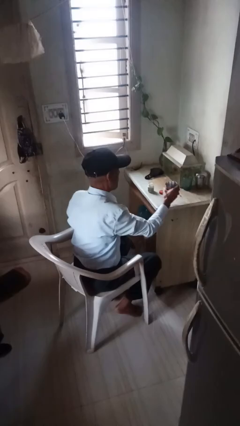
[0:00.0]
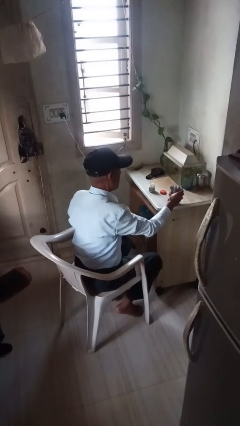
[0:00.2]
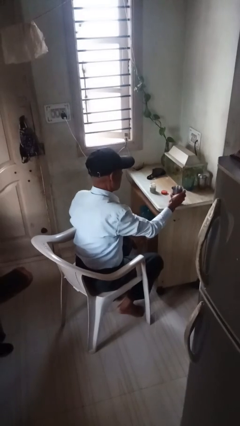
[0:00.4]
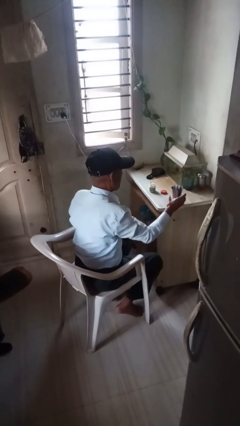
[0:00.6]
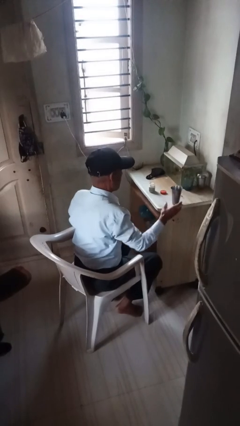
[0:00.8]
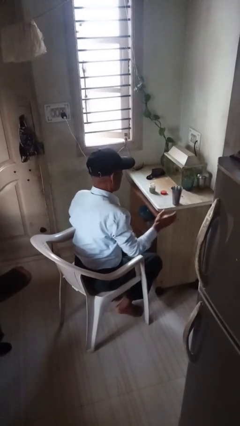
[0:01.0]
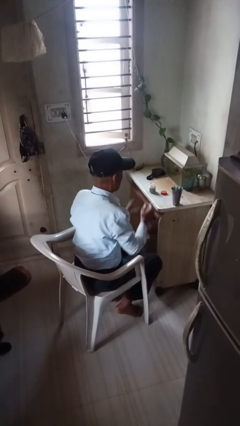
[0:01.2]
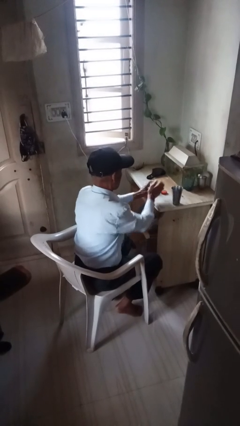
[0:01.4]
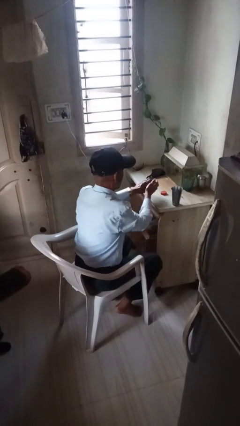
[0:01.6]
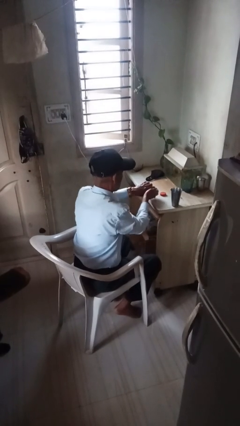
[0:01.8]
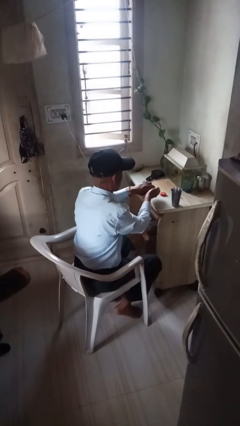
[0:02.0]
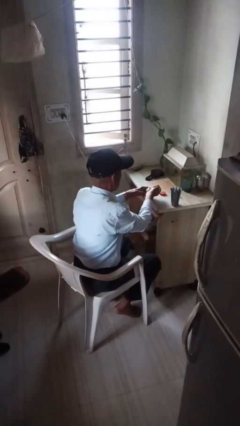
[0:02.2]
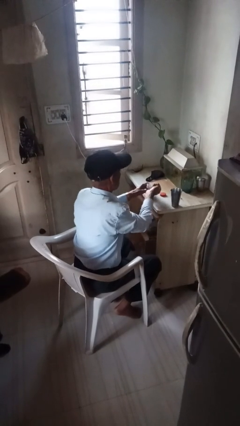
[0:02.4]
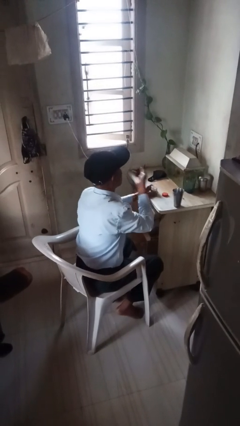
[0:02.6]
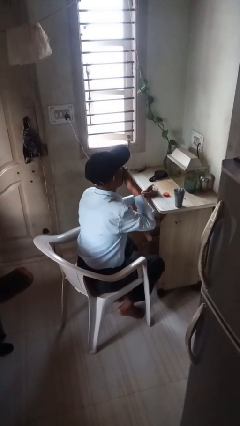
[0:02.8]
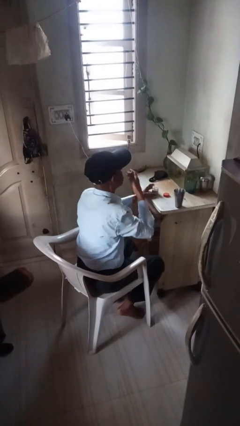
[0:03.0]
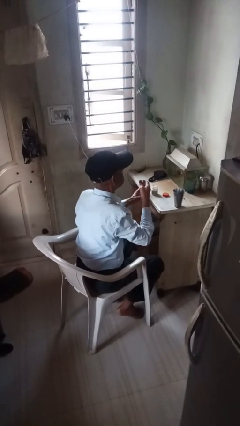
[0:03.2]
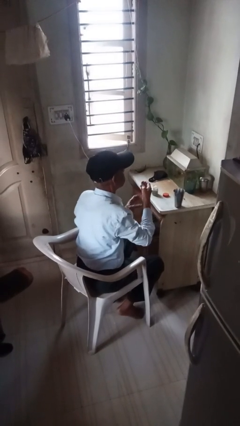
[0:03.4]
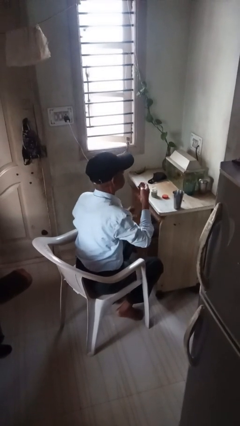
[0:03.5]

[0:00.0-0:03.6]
person takes medicine pills

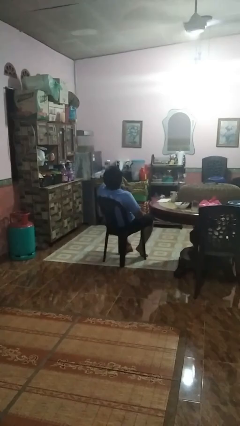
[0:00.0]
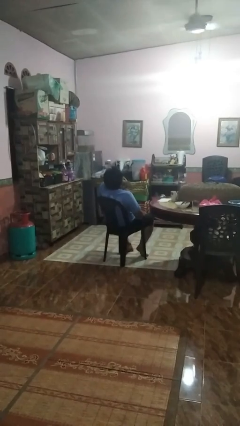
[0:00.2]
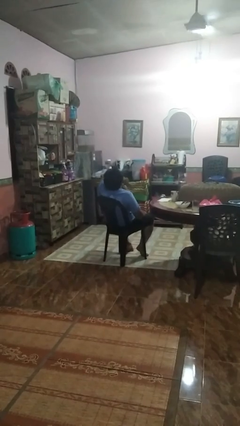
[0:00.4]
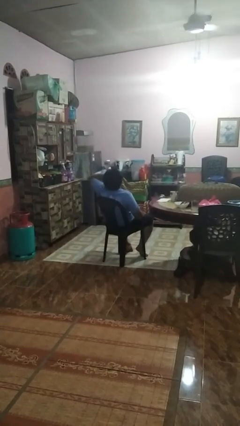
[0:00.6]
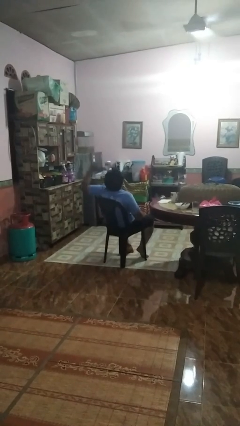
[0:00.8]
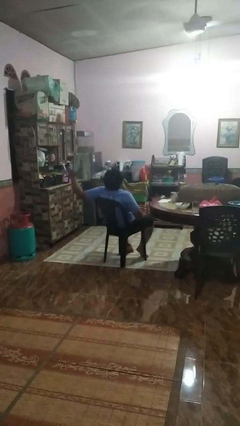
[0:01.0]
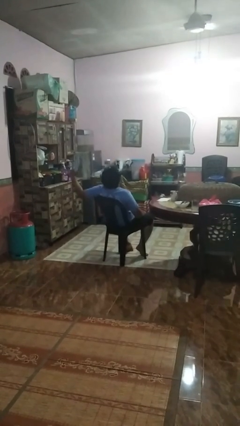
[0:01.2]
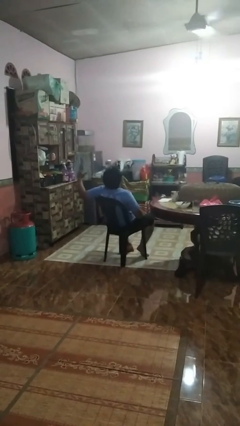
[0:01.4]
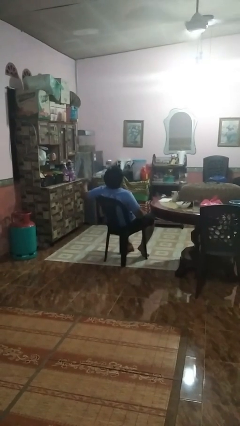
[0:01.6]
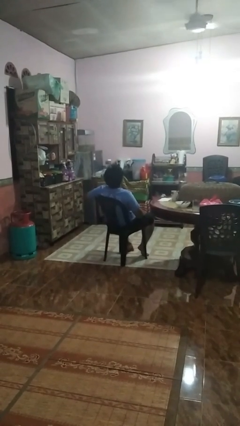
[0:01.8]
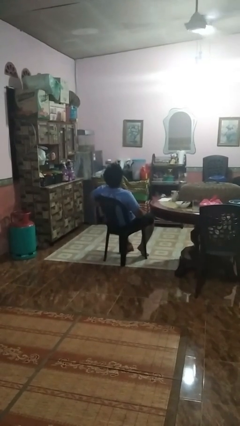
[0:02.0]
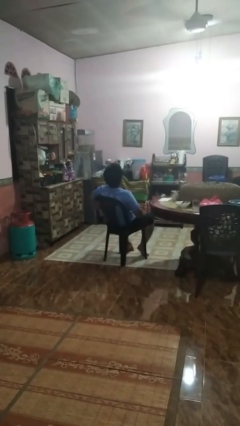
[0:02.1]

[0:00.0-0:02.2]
person gestures cut

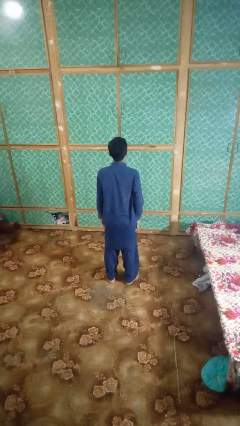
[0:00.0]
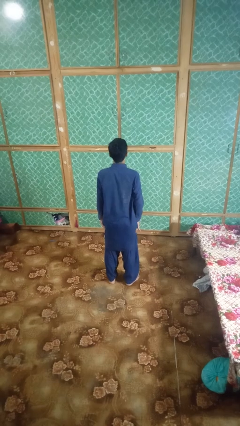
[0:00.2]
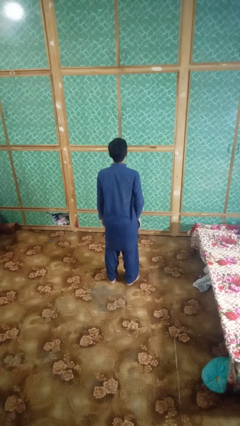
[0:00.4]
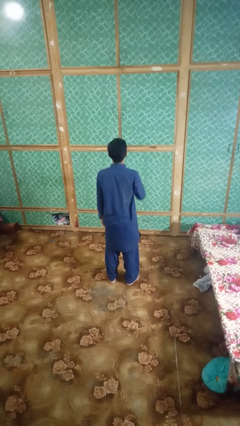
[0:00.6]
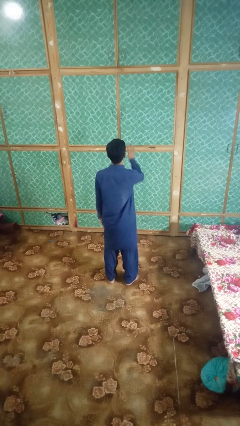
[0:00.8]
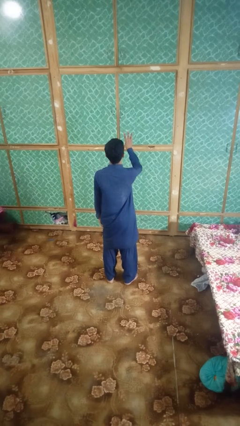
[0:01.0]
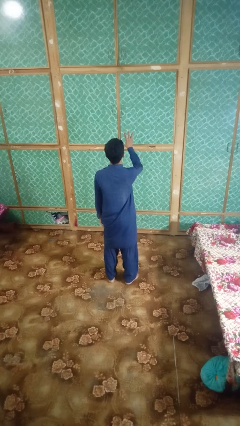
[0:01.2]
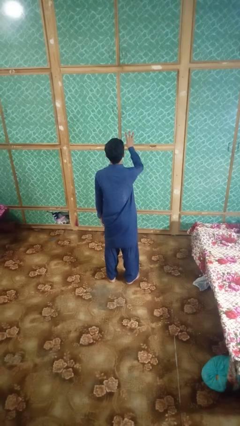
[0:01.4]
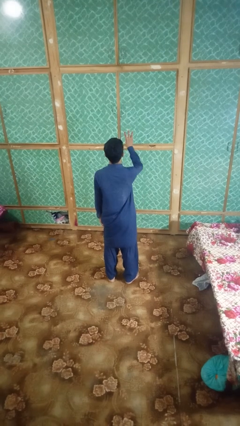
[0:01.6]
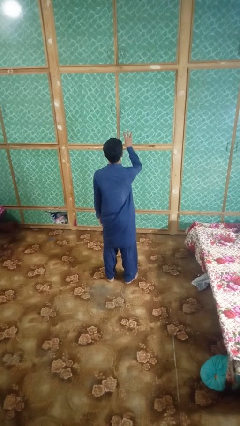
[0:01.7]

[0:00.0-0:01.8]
person gestures number three

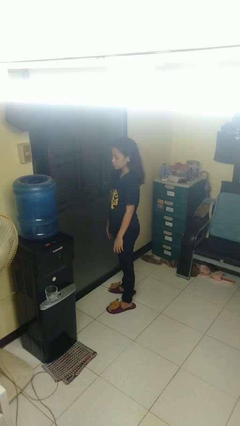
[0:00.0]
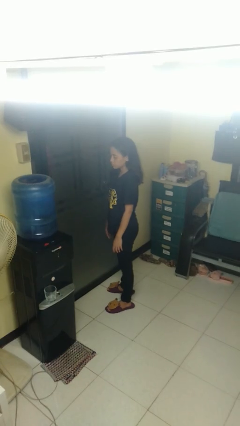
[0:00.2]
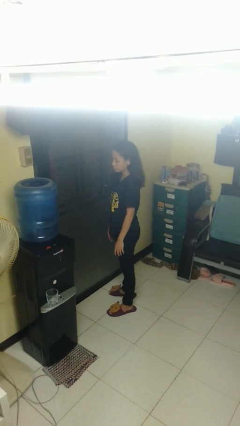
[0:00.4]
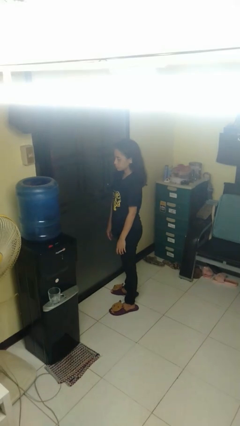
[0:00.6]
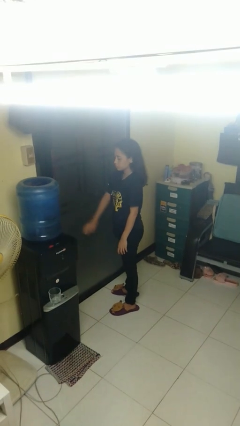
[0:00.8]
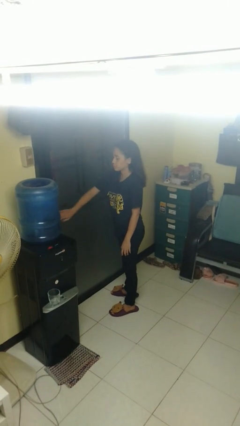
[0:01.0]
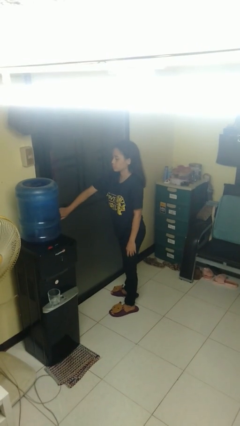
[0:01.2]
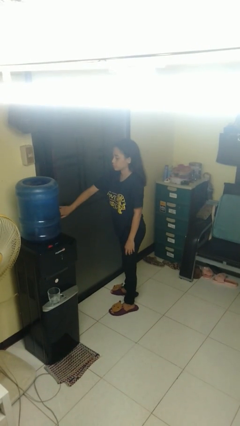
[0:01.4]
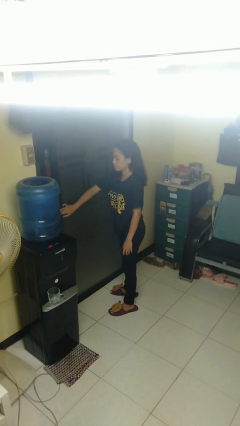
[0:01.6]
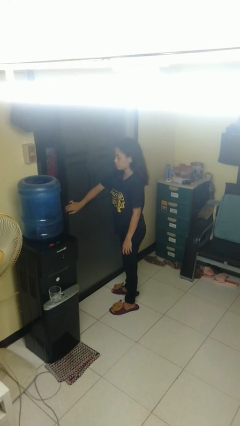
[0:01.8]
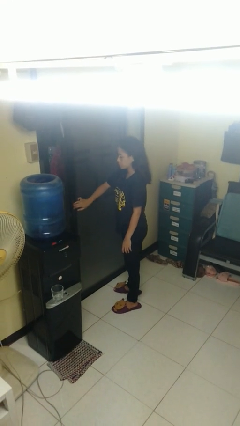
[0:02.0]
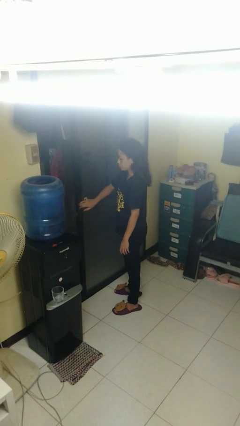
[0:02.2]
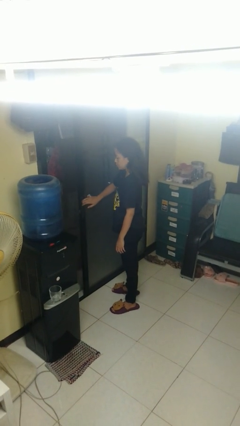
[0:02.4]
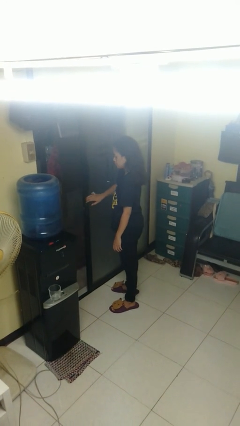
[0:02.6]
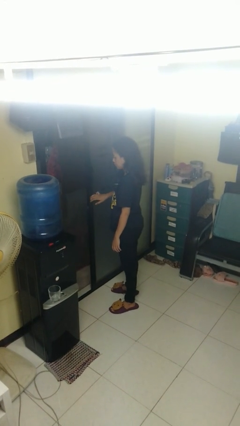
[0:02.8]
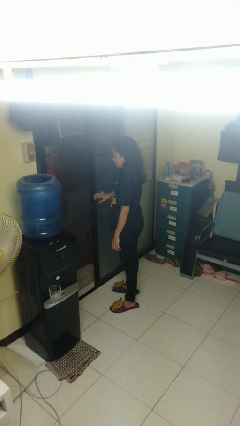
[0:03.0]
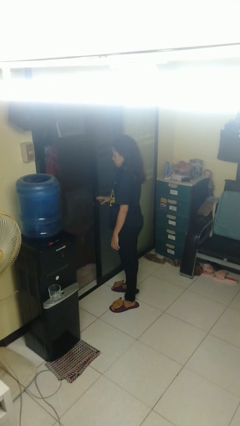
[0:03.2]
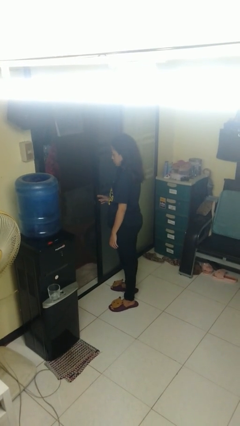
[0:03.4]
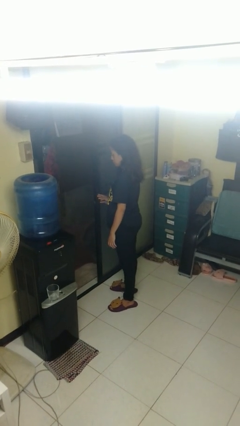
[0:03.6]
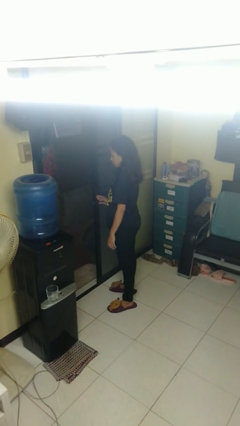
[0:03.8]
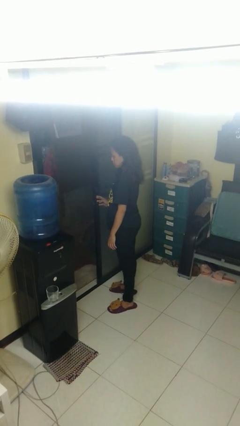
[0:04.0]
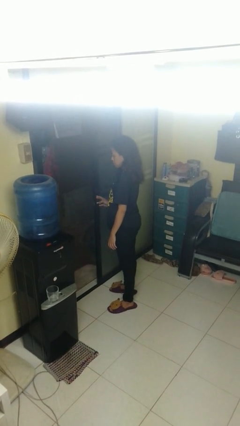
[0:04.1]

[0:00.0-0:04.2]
person opens sliding door

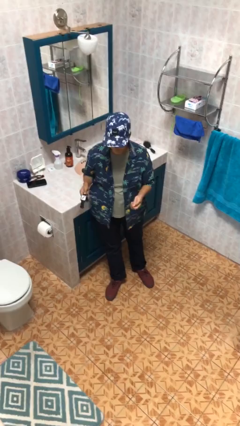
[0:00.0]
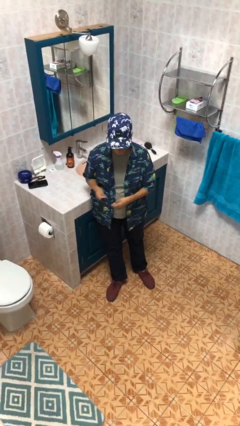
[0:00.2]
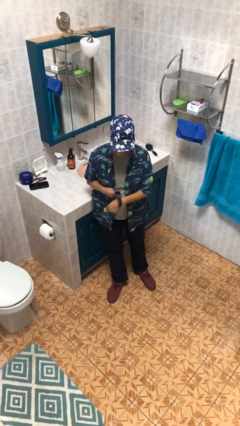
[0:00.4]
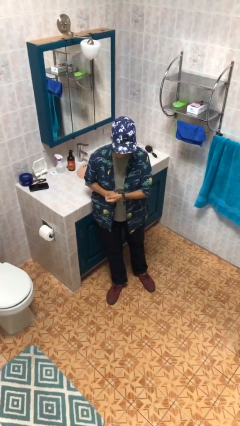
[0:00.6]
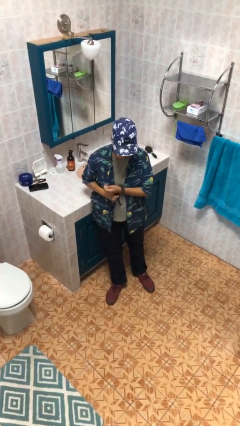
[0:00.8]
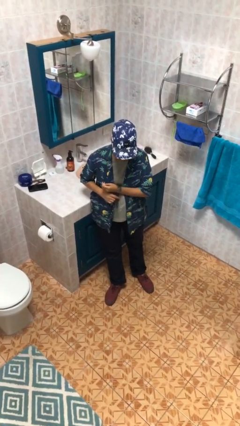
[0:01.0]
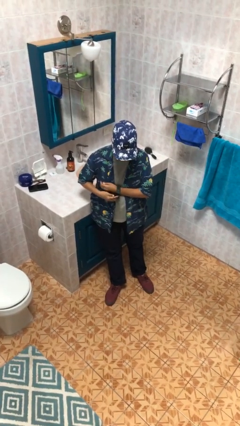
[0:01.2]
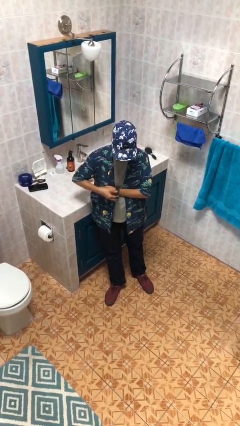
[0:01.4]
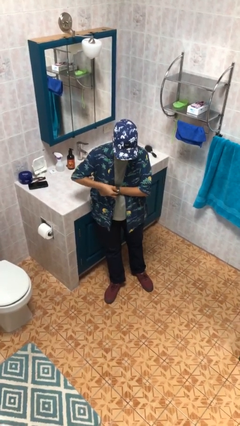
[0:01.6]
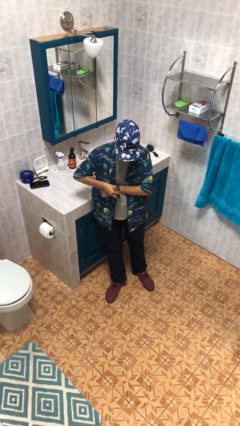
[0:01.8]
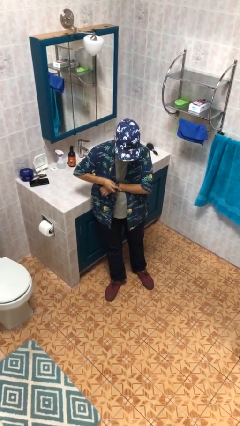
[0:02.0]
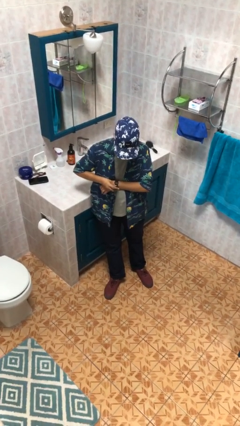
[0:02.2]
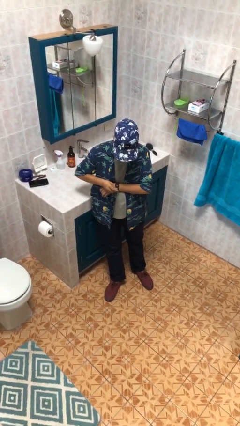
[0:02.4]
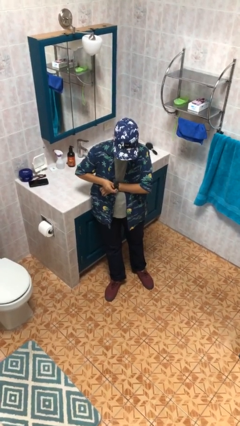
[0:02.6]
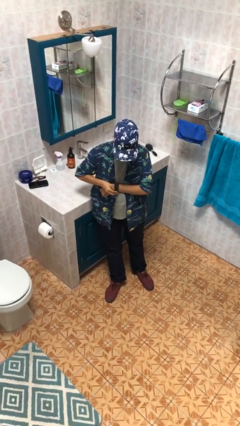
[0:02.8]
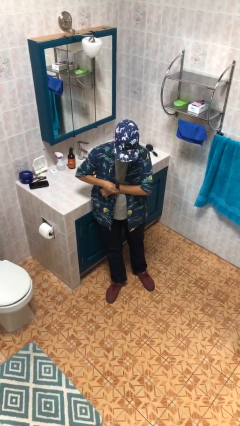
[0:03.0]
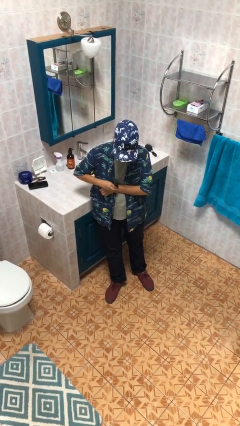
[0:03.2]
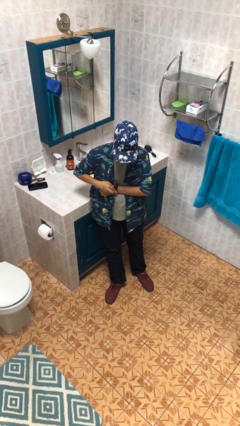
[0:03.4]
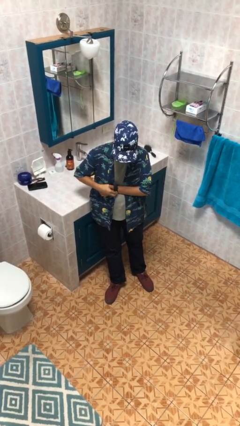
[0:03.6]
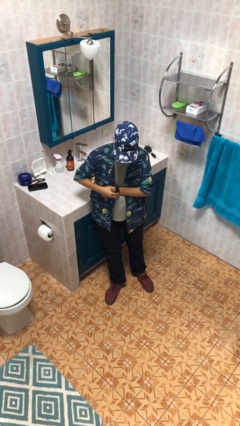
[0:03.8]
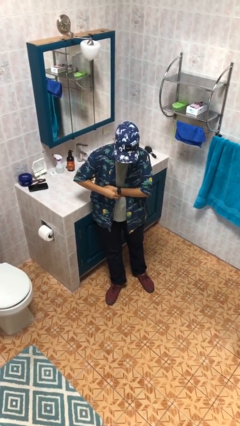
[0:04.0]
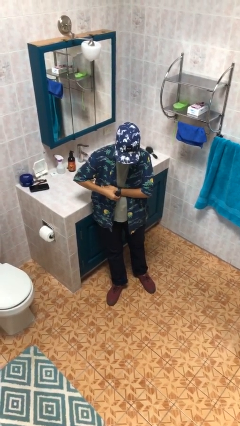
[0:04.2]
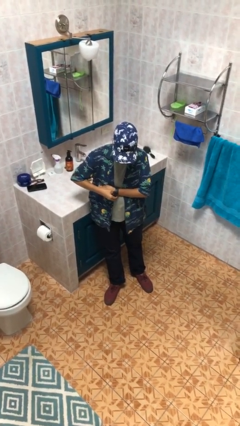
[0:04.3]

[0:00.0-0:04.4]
person puts on wristwatch

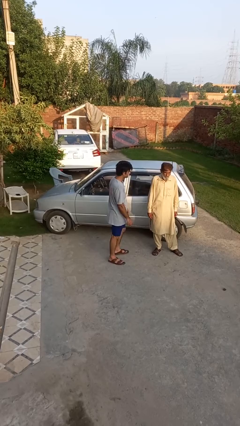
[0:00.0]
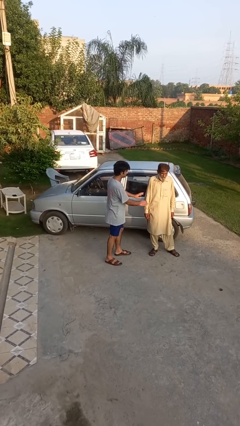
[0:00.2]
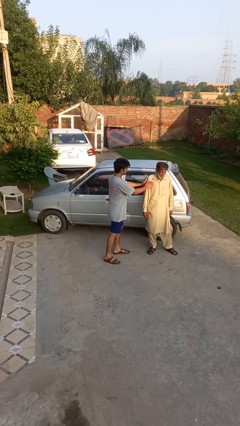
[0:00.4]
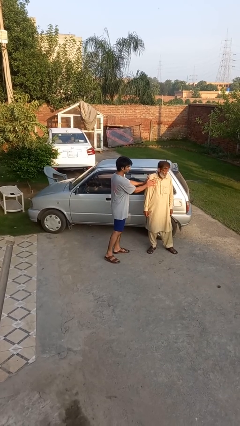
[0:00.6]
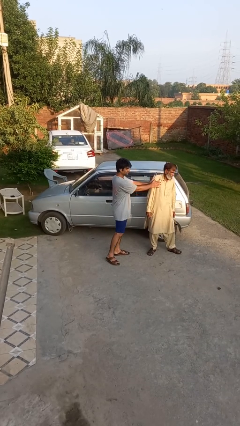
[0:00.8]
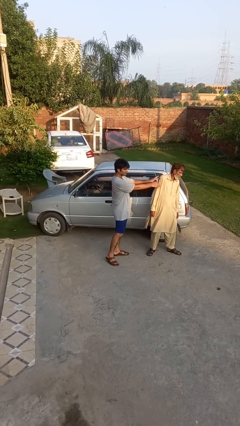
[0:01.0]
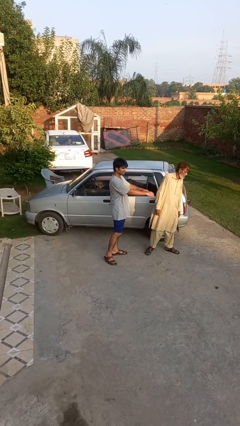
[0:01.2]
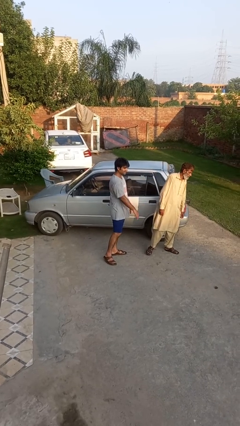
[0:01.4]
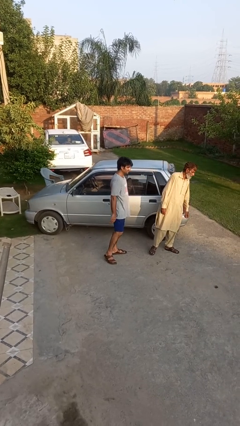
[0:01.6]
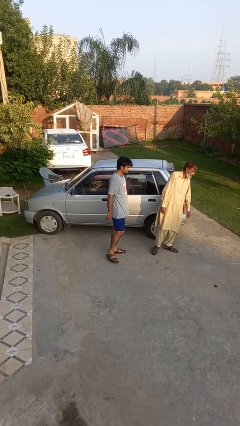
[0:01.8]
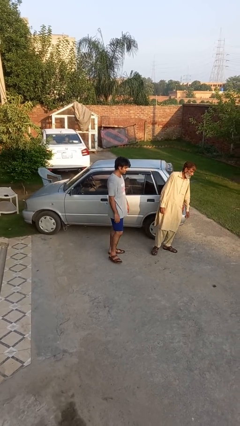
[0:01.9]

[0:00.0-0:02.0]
person shoves person
